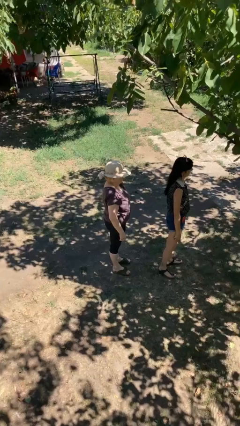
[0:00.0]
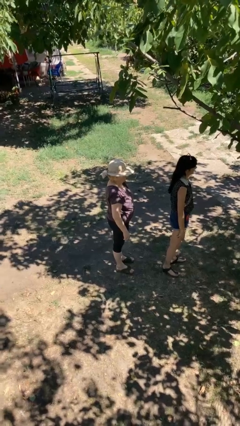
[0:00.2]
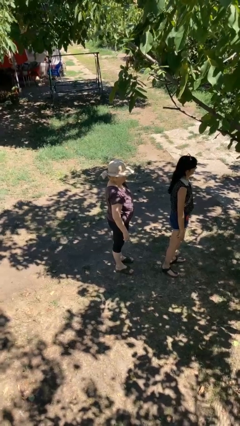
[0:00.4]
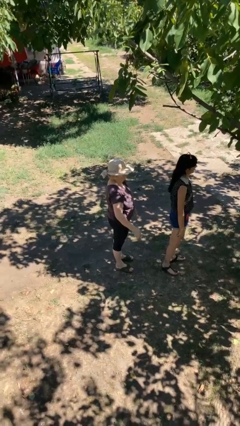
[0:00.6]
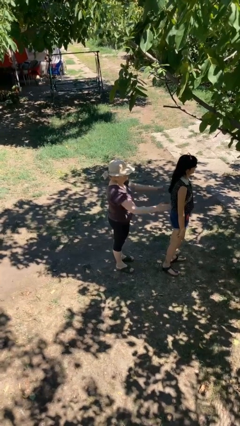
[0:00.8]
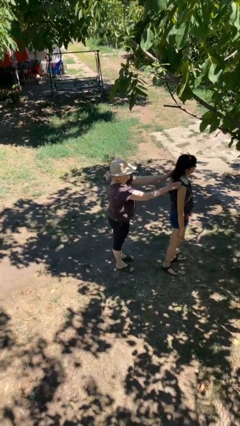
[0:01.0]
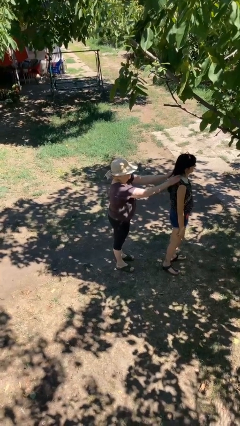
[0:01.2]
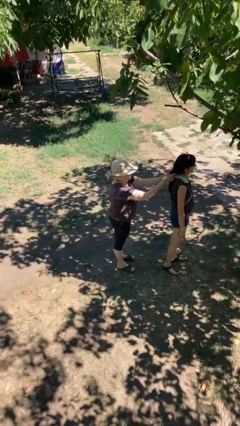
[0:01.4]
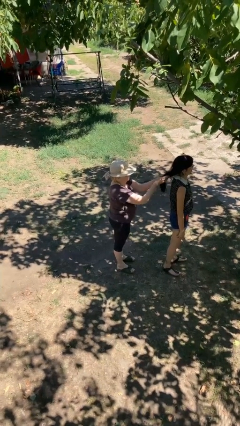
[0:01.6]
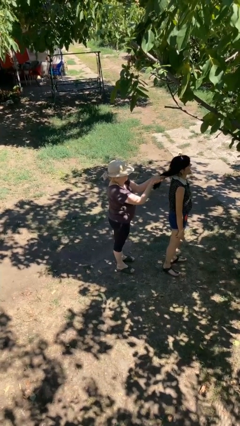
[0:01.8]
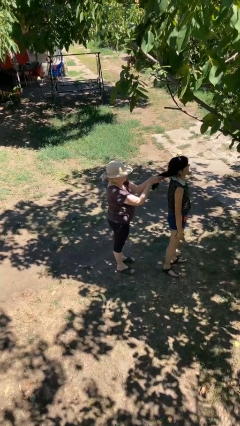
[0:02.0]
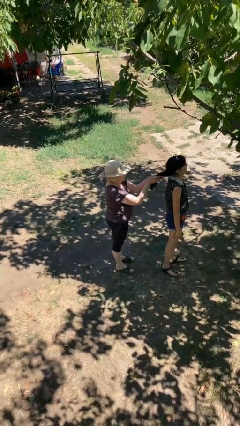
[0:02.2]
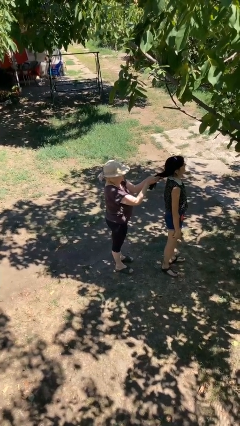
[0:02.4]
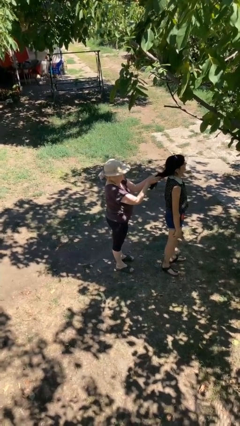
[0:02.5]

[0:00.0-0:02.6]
person grabs person by hair

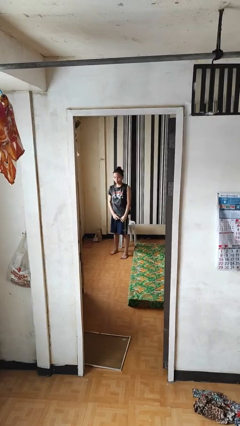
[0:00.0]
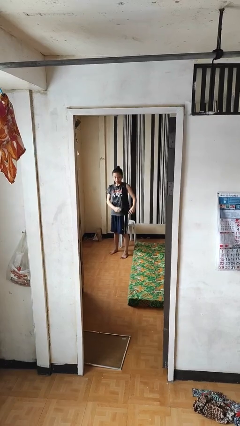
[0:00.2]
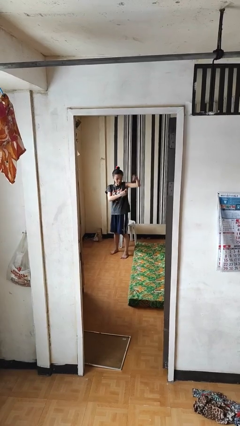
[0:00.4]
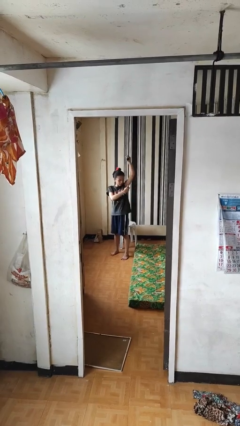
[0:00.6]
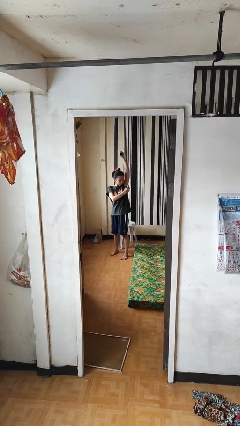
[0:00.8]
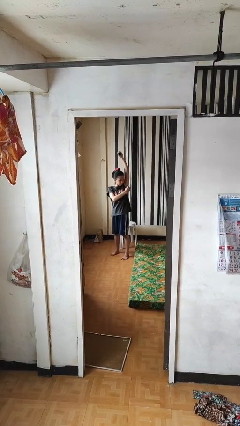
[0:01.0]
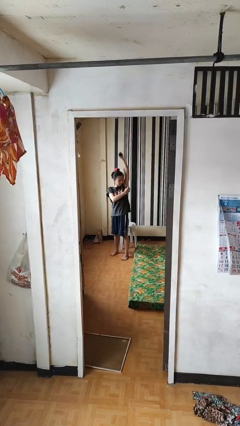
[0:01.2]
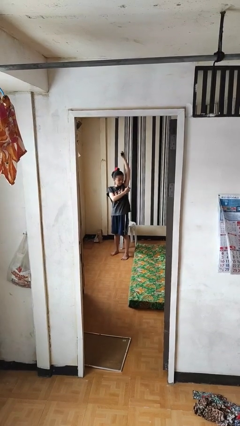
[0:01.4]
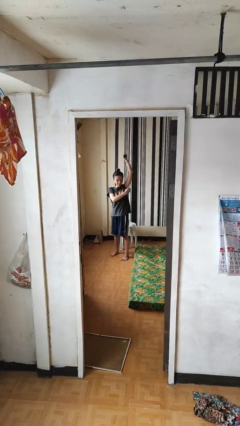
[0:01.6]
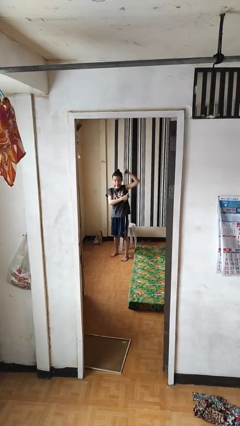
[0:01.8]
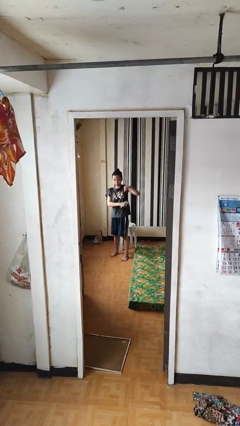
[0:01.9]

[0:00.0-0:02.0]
person applies deodorant

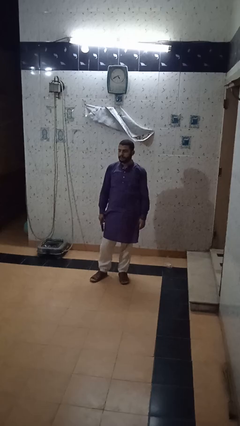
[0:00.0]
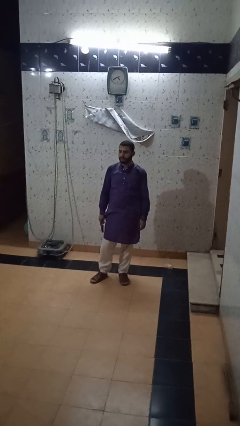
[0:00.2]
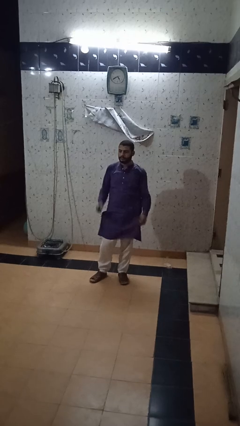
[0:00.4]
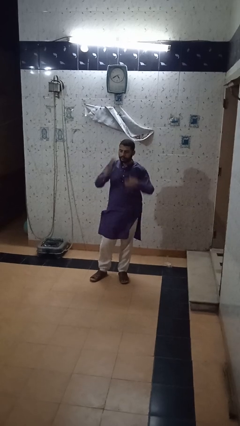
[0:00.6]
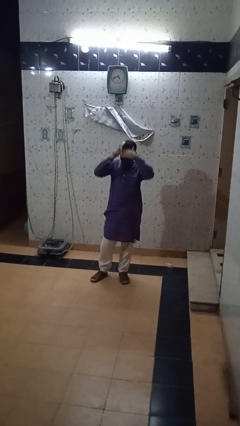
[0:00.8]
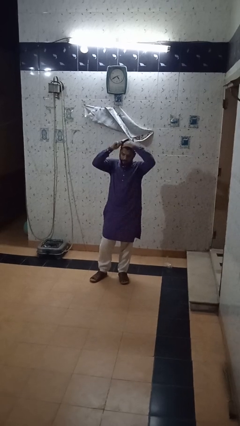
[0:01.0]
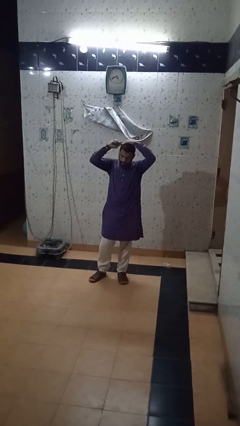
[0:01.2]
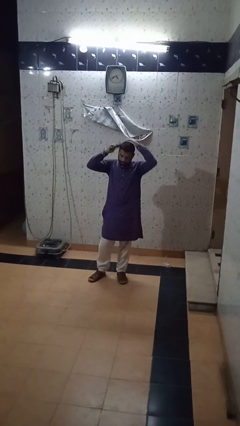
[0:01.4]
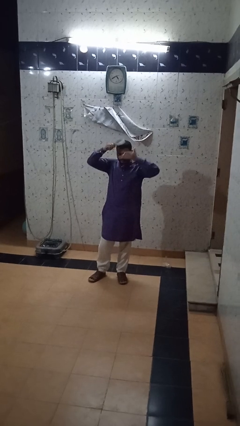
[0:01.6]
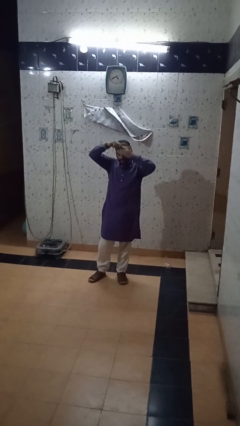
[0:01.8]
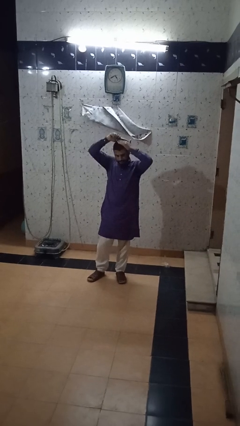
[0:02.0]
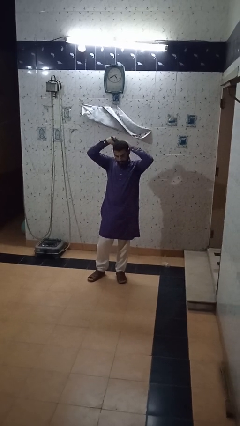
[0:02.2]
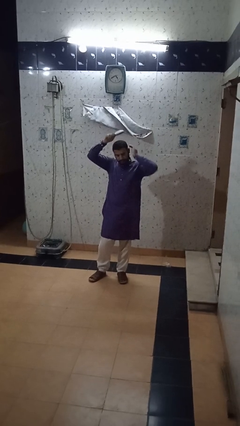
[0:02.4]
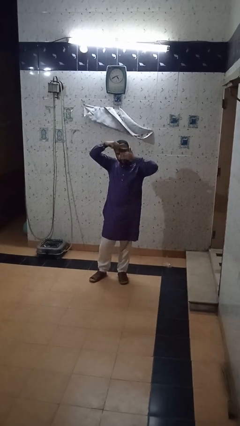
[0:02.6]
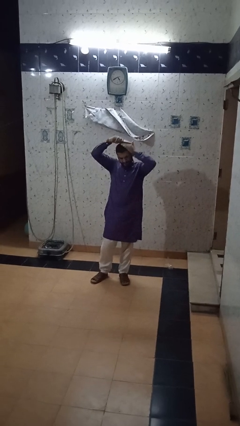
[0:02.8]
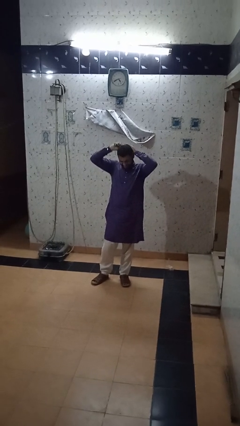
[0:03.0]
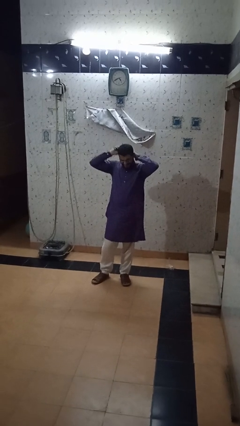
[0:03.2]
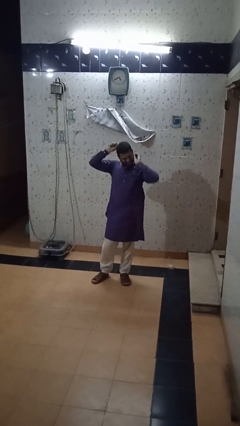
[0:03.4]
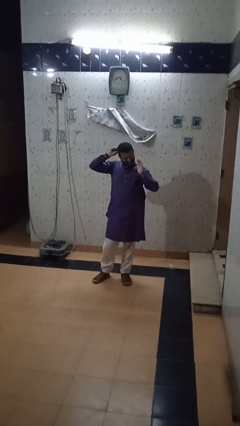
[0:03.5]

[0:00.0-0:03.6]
person brushes hair

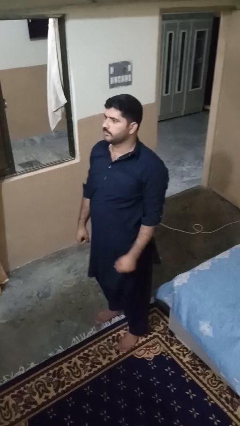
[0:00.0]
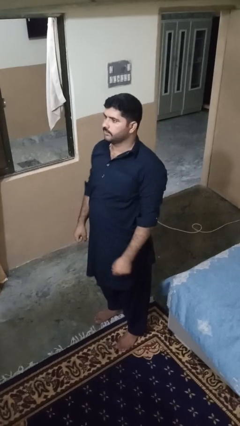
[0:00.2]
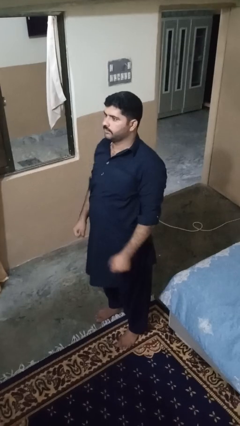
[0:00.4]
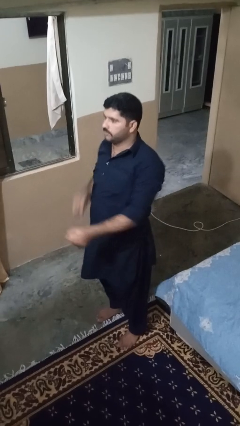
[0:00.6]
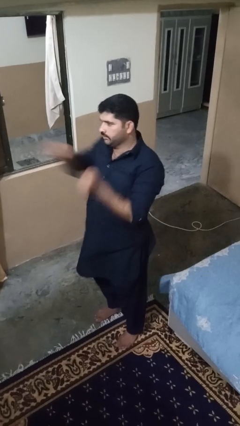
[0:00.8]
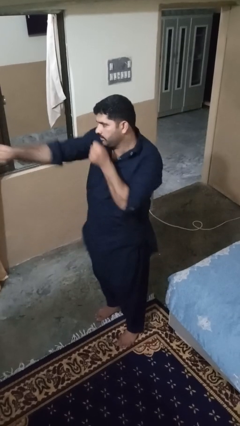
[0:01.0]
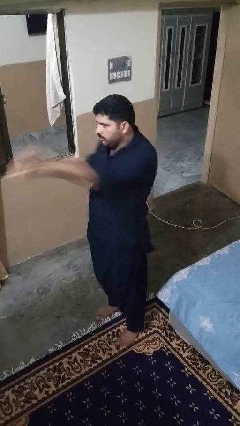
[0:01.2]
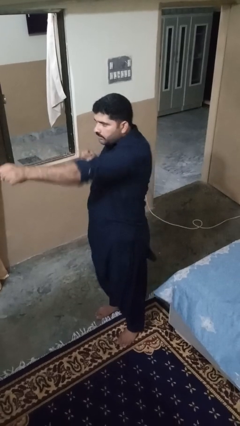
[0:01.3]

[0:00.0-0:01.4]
person punches

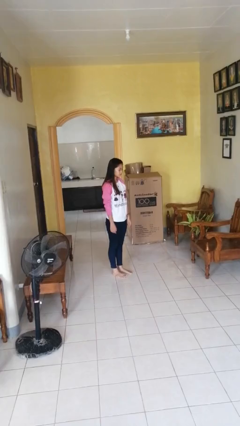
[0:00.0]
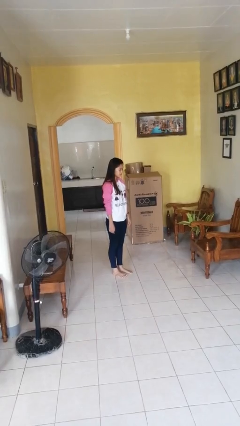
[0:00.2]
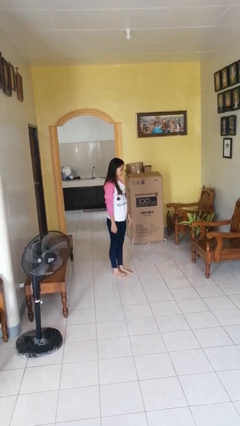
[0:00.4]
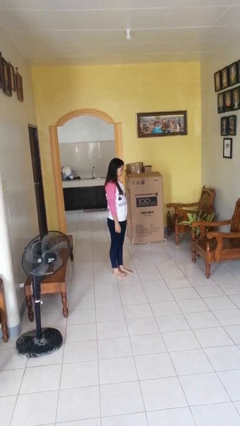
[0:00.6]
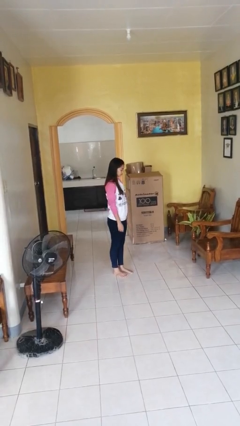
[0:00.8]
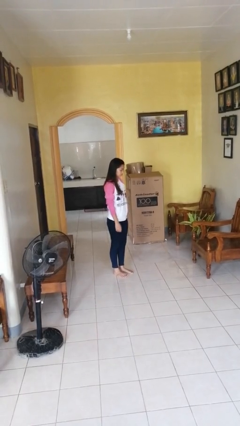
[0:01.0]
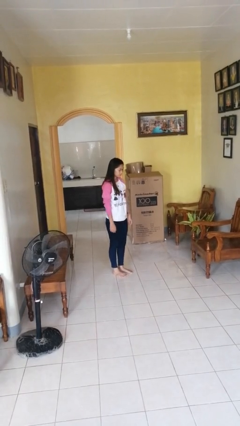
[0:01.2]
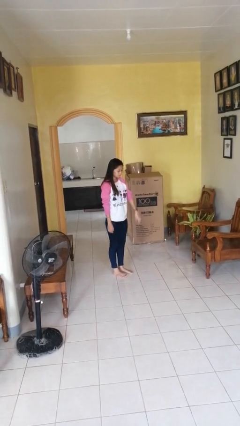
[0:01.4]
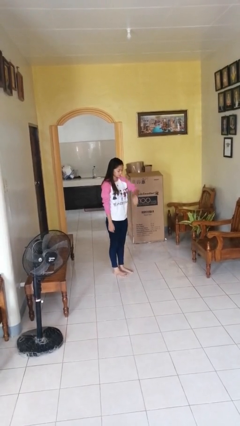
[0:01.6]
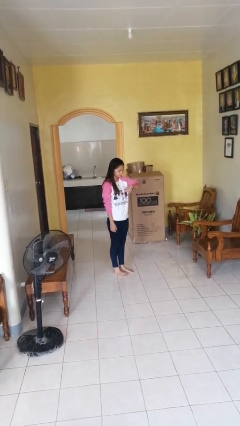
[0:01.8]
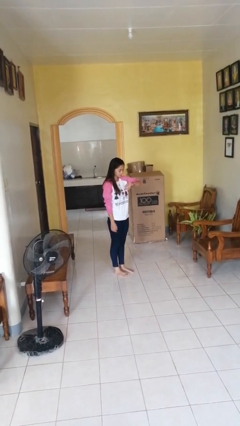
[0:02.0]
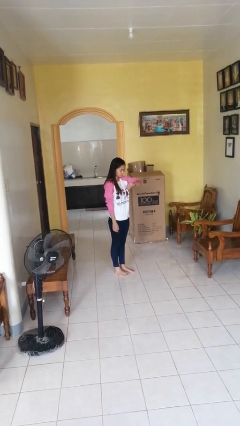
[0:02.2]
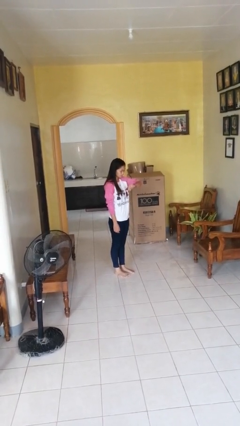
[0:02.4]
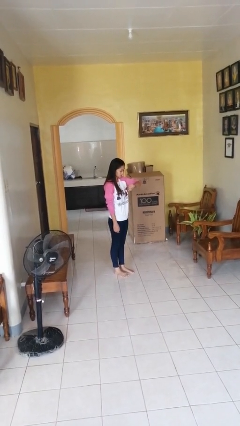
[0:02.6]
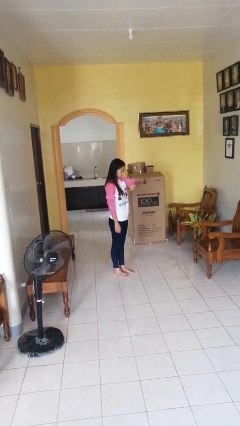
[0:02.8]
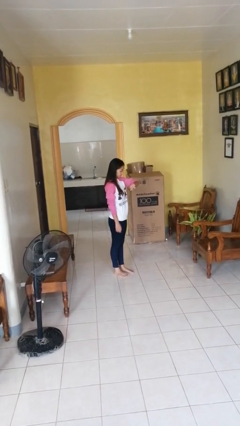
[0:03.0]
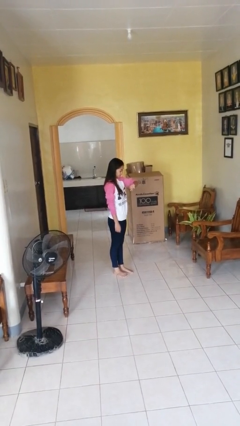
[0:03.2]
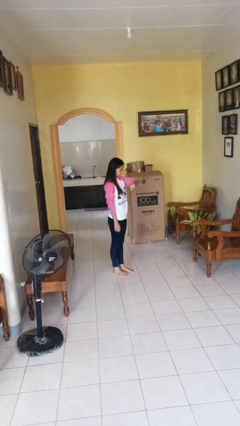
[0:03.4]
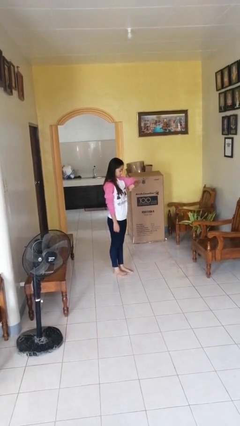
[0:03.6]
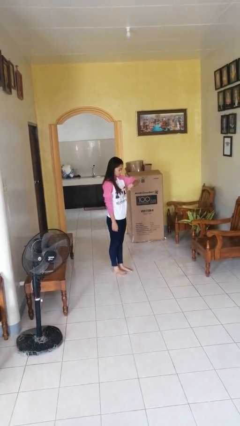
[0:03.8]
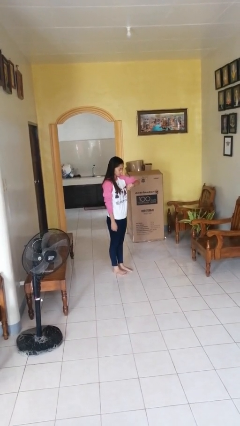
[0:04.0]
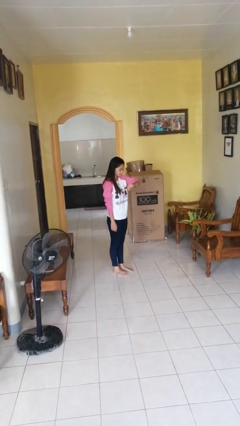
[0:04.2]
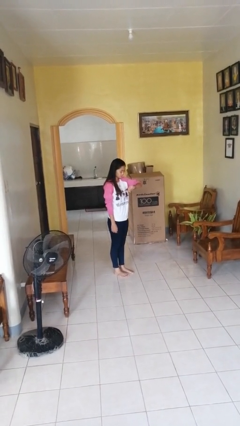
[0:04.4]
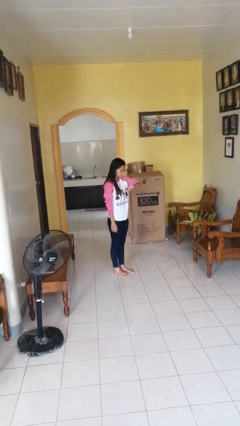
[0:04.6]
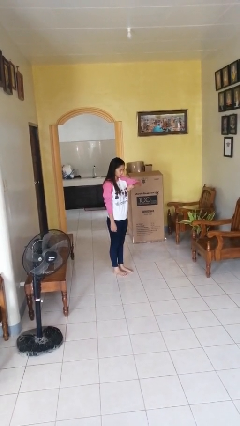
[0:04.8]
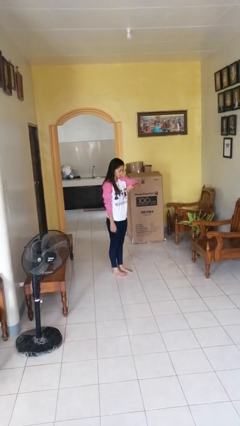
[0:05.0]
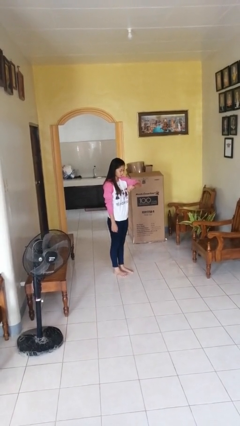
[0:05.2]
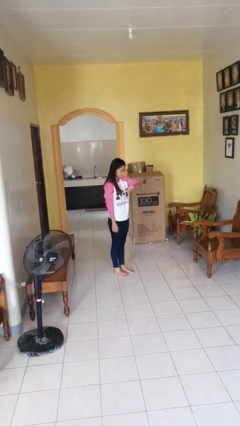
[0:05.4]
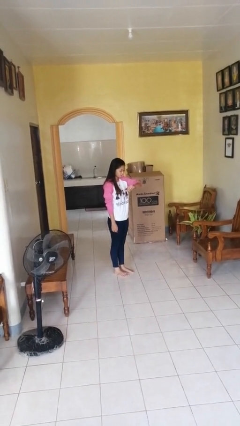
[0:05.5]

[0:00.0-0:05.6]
person looks at wristwatch

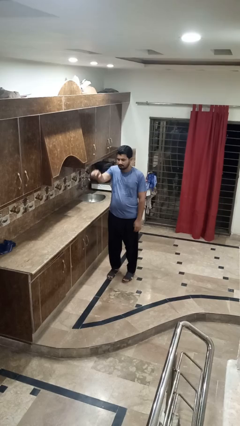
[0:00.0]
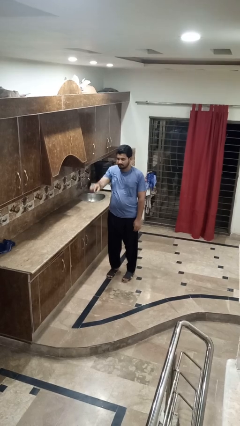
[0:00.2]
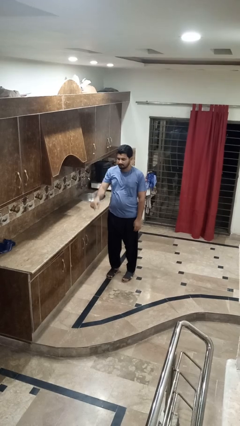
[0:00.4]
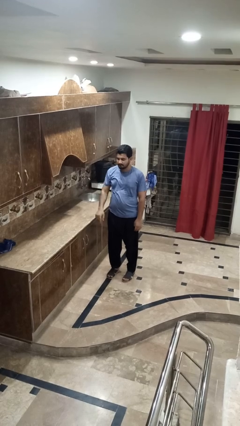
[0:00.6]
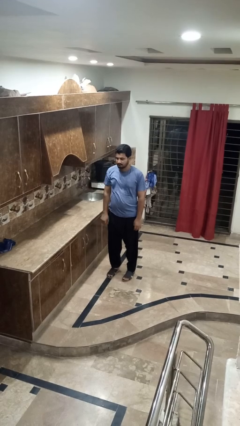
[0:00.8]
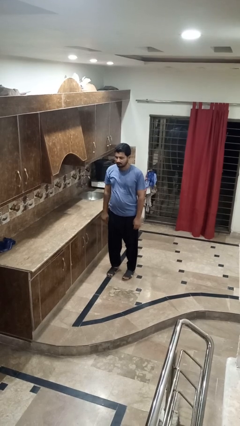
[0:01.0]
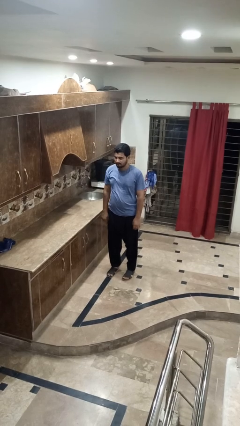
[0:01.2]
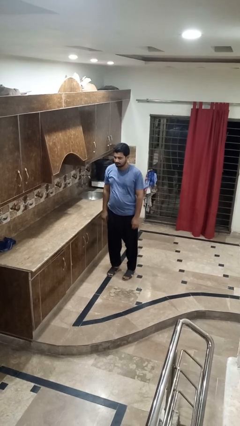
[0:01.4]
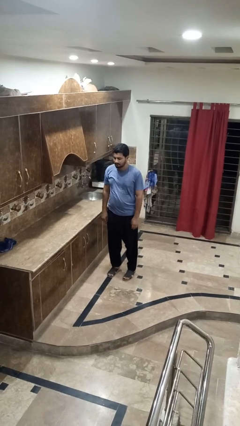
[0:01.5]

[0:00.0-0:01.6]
person gestures swipe down

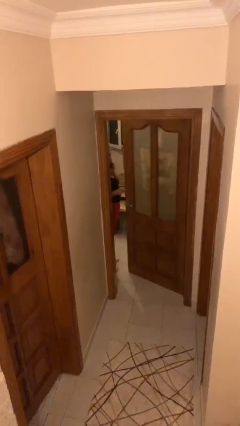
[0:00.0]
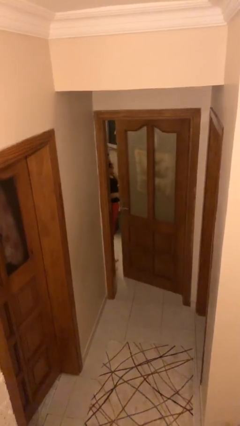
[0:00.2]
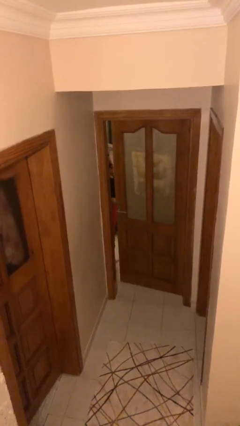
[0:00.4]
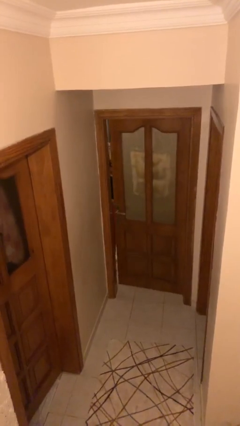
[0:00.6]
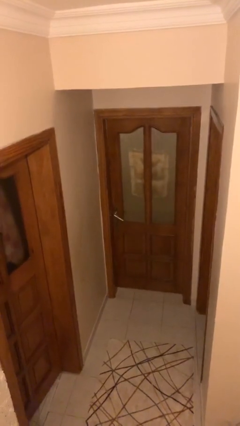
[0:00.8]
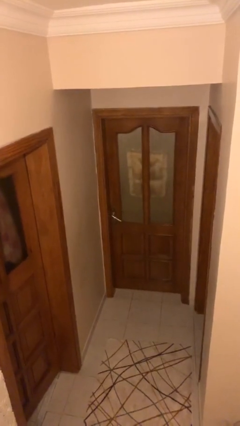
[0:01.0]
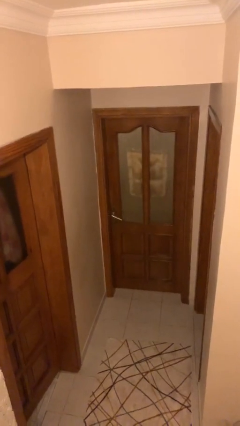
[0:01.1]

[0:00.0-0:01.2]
person closes facility door
